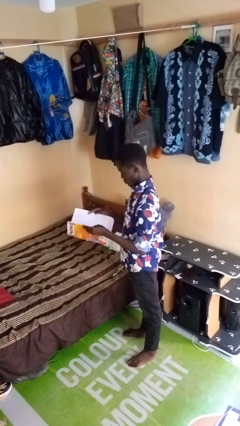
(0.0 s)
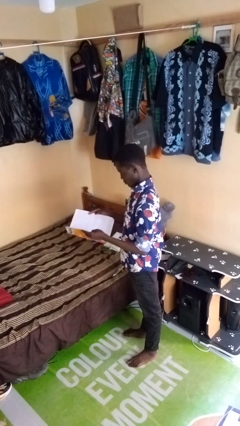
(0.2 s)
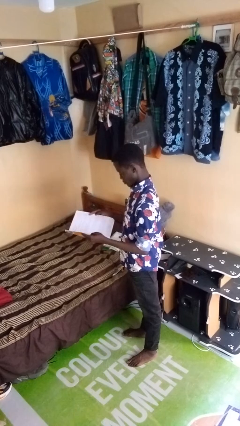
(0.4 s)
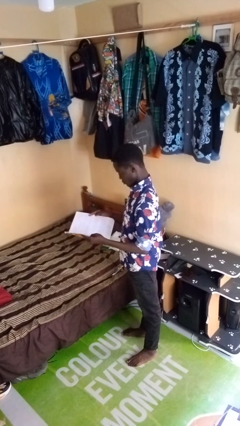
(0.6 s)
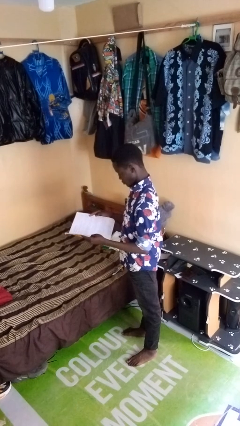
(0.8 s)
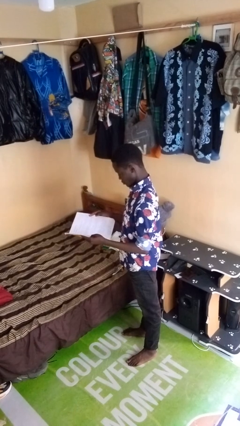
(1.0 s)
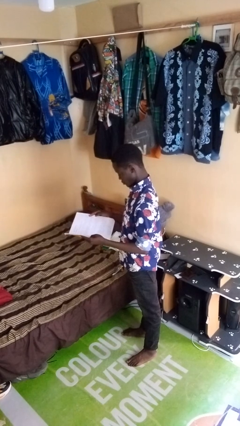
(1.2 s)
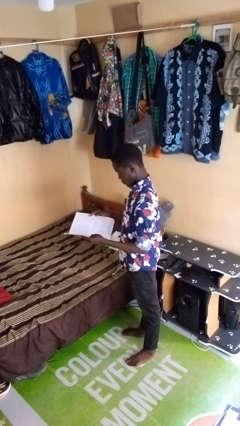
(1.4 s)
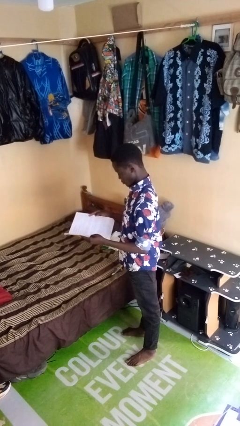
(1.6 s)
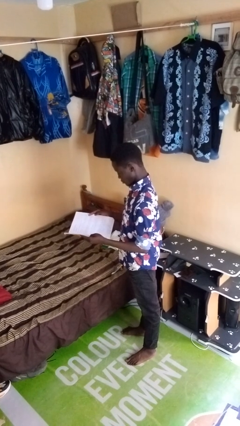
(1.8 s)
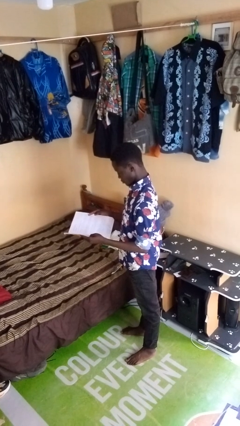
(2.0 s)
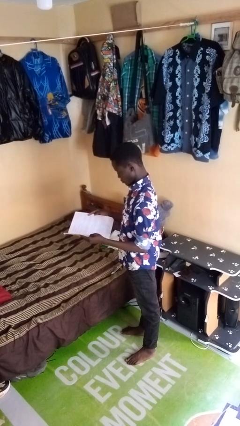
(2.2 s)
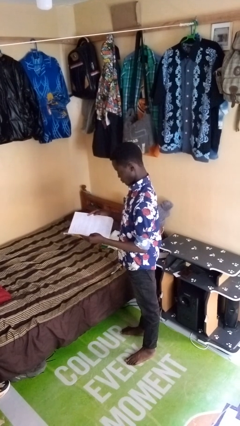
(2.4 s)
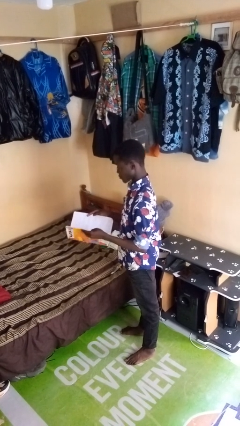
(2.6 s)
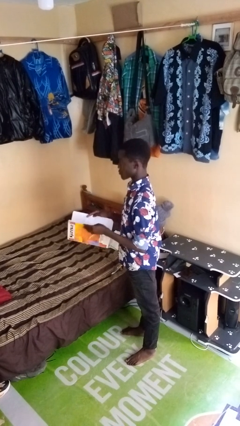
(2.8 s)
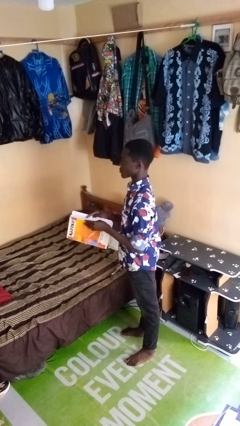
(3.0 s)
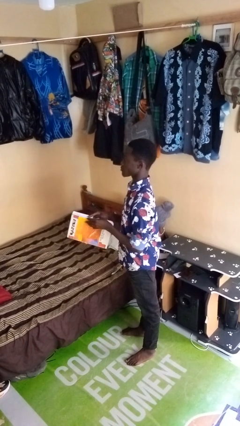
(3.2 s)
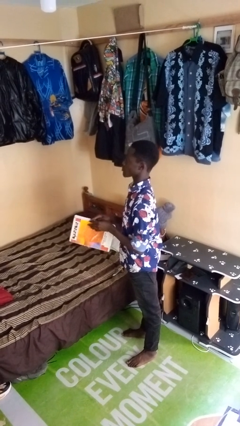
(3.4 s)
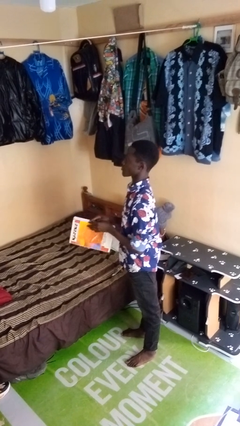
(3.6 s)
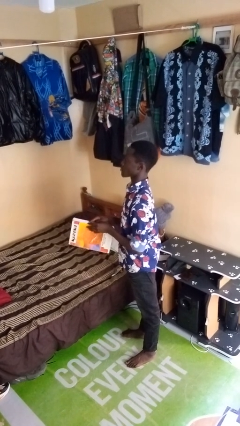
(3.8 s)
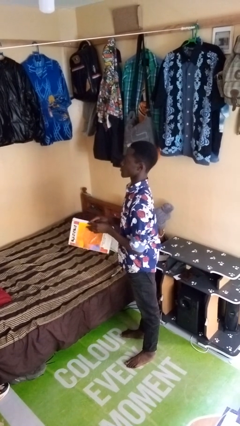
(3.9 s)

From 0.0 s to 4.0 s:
person reads newspaper

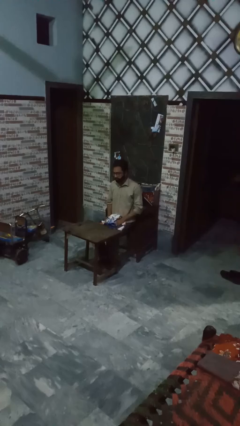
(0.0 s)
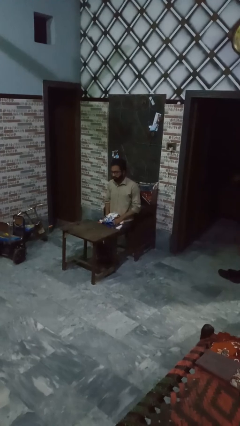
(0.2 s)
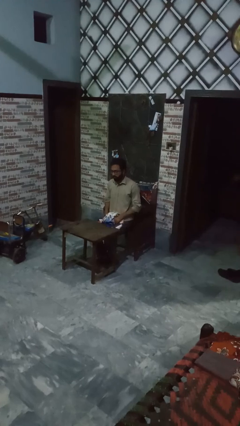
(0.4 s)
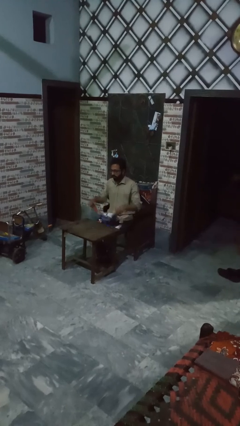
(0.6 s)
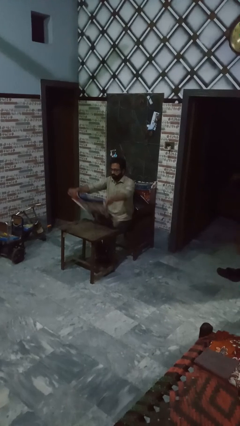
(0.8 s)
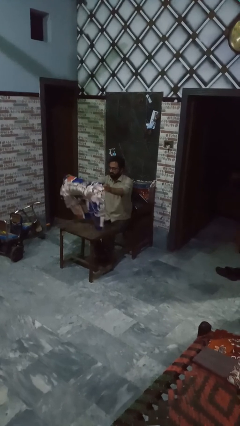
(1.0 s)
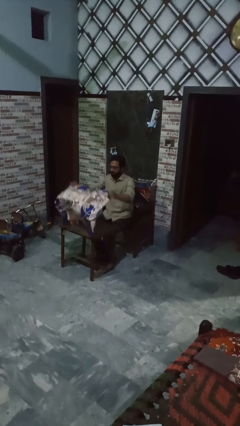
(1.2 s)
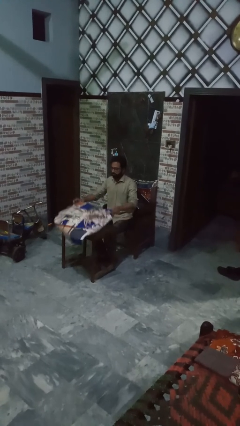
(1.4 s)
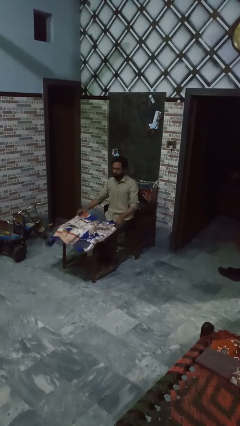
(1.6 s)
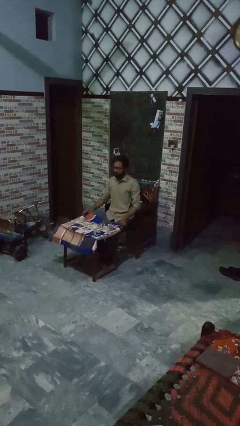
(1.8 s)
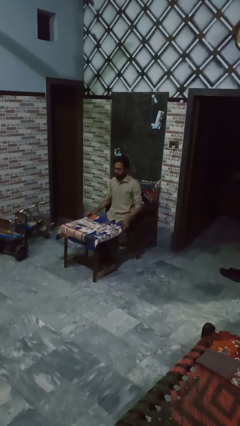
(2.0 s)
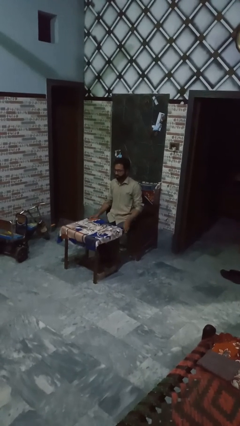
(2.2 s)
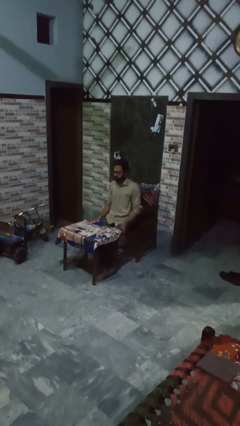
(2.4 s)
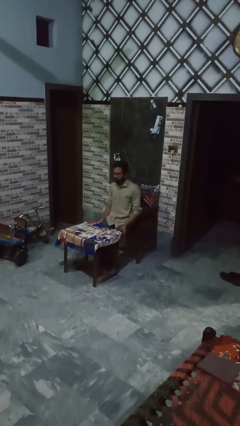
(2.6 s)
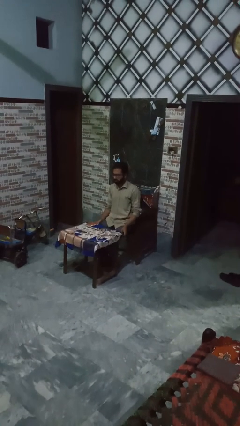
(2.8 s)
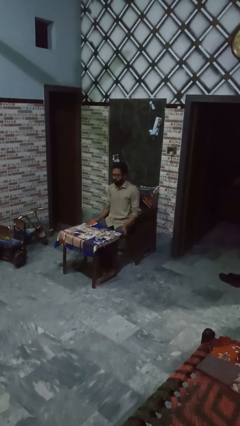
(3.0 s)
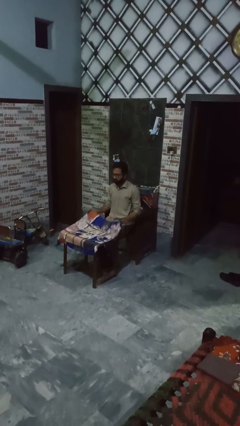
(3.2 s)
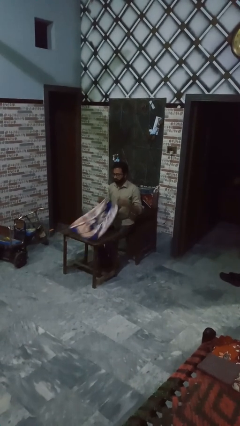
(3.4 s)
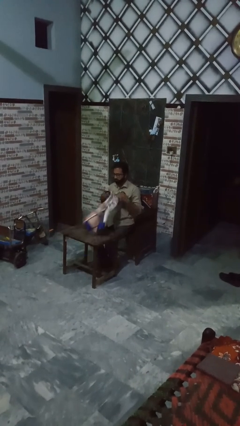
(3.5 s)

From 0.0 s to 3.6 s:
person folds tablecloth

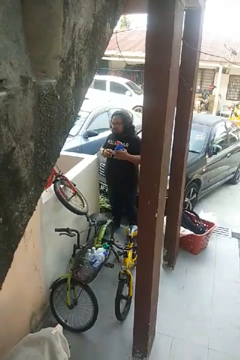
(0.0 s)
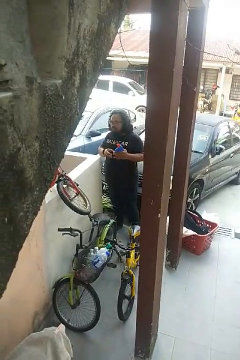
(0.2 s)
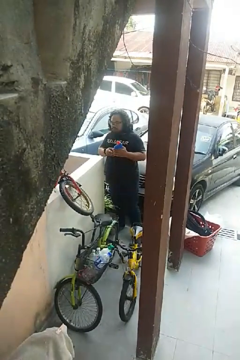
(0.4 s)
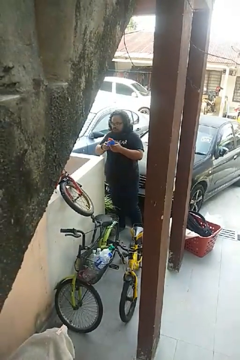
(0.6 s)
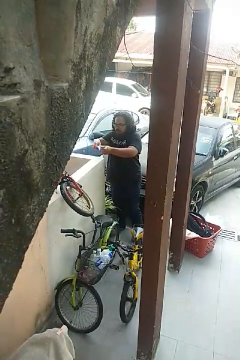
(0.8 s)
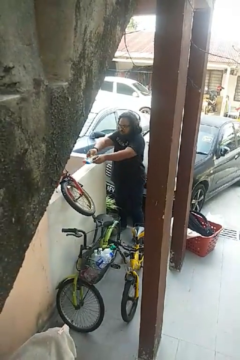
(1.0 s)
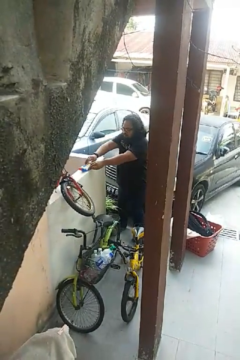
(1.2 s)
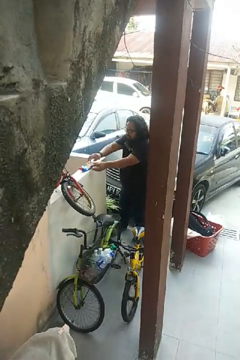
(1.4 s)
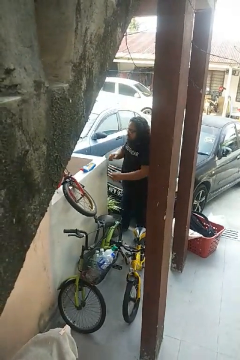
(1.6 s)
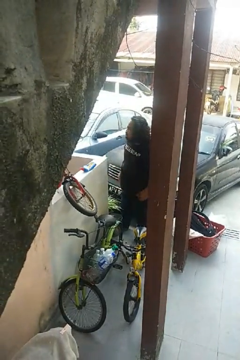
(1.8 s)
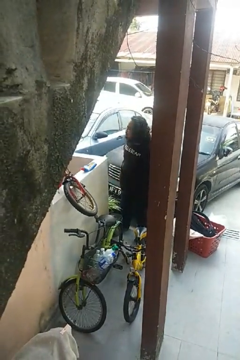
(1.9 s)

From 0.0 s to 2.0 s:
person puts down object on countertop

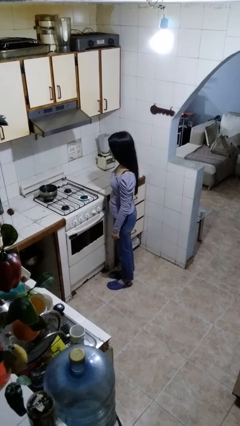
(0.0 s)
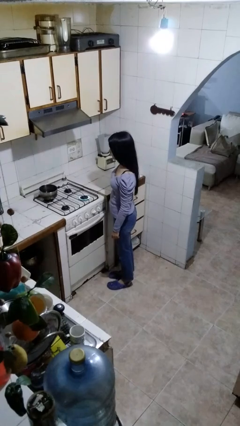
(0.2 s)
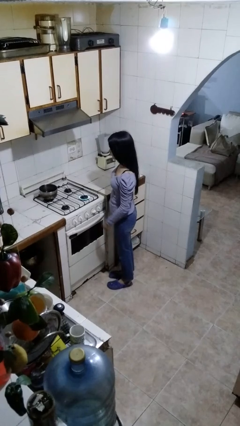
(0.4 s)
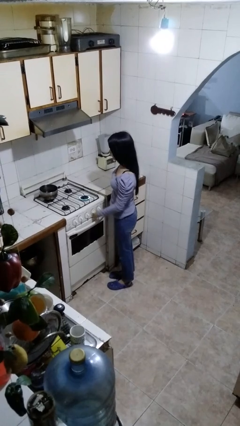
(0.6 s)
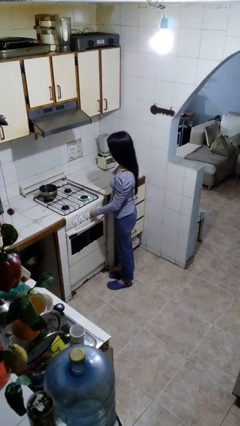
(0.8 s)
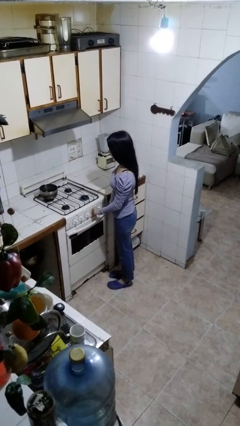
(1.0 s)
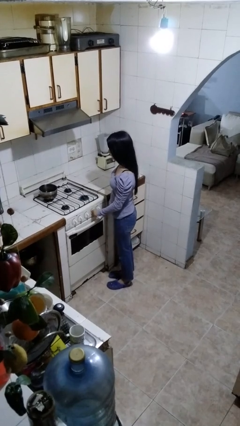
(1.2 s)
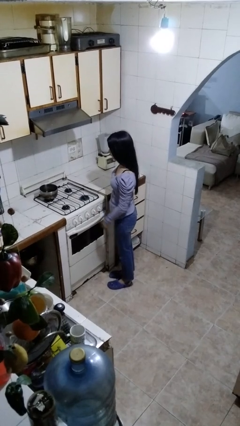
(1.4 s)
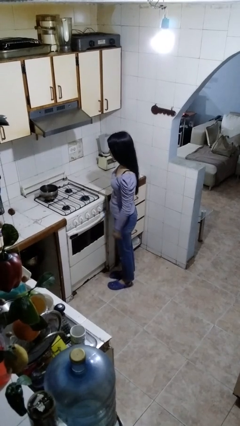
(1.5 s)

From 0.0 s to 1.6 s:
person turns off stovetop

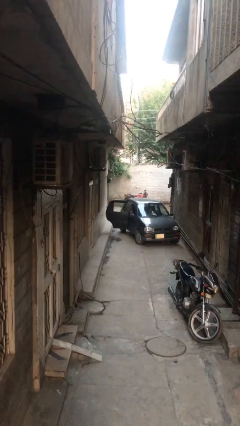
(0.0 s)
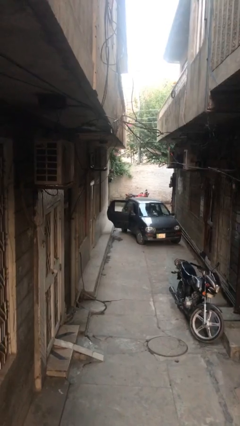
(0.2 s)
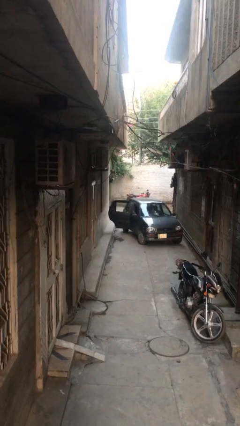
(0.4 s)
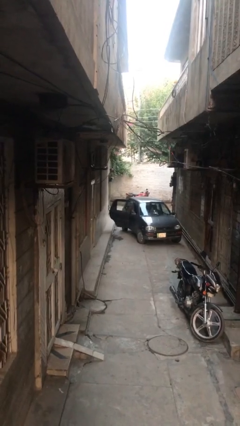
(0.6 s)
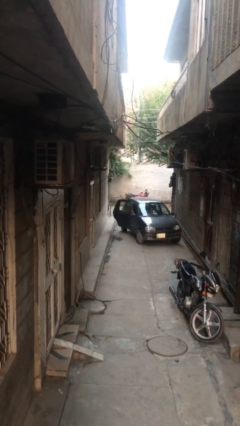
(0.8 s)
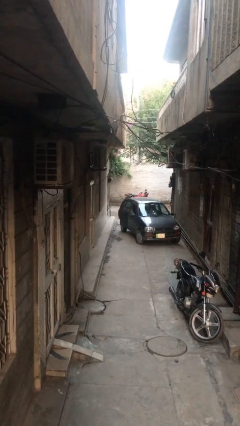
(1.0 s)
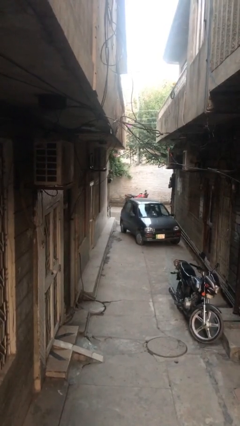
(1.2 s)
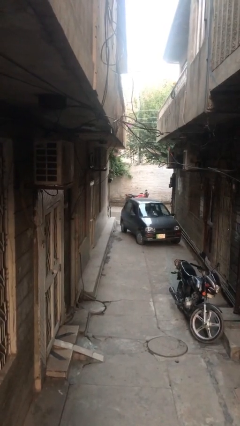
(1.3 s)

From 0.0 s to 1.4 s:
person closes car door

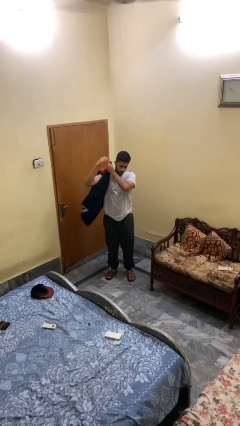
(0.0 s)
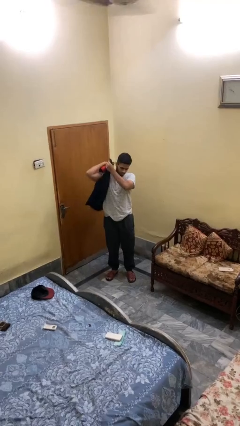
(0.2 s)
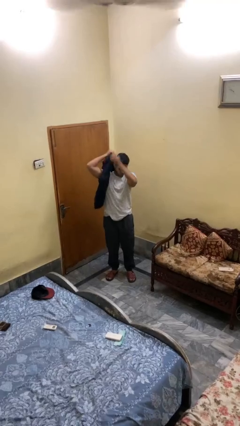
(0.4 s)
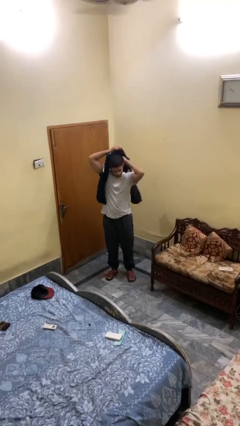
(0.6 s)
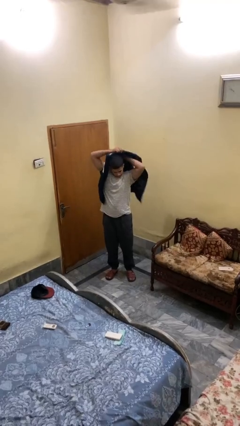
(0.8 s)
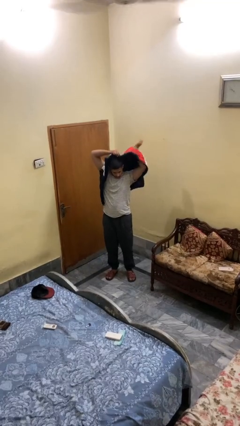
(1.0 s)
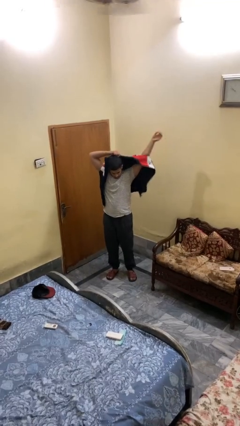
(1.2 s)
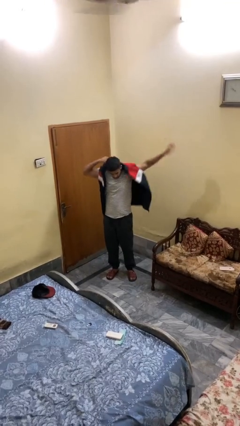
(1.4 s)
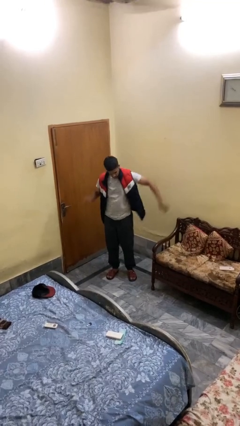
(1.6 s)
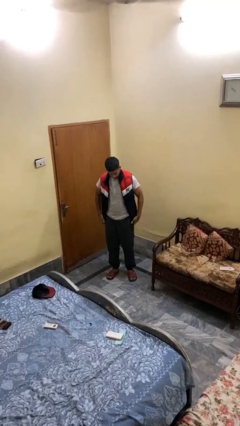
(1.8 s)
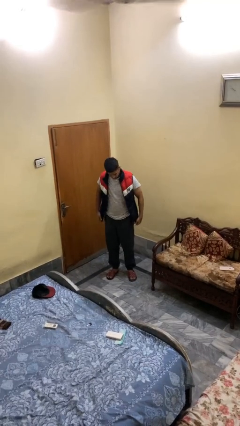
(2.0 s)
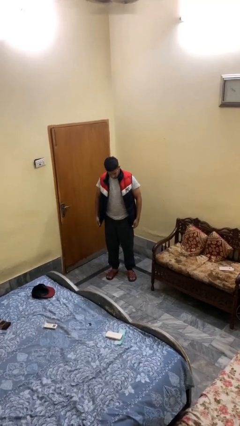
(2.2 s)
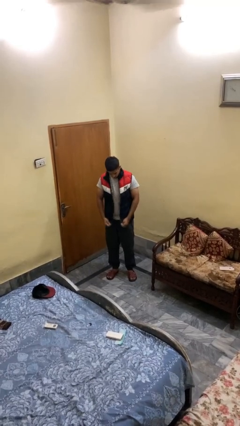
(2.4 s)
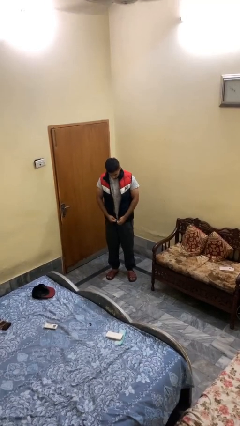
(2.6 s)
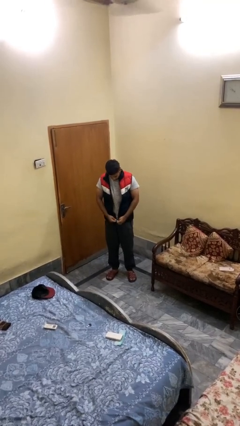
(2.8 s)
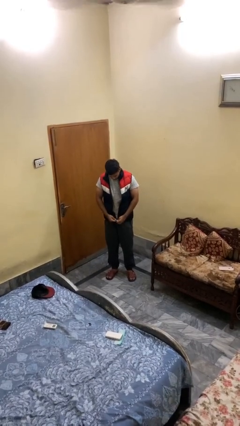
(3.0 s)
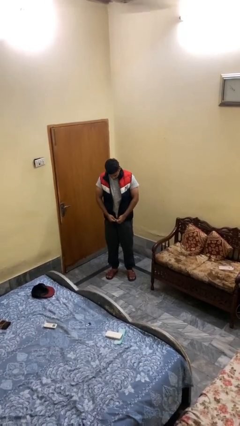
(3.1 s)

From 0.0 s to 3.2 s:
person puts on jacket

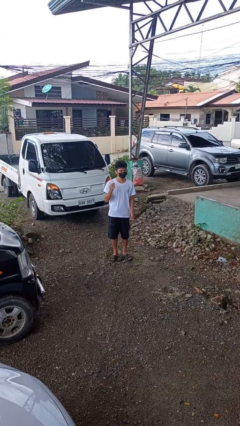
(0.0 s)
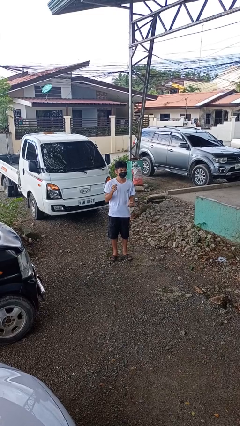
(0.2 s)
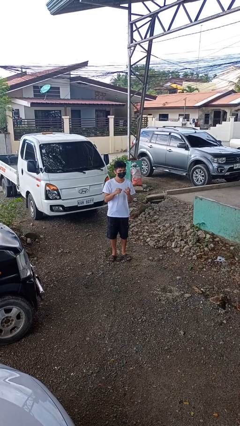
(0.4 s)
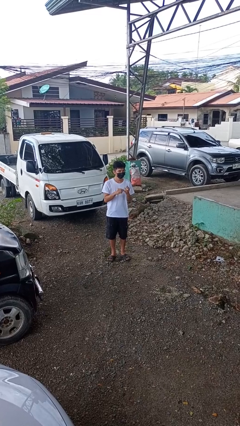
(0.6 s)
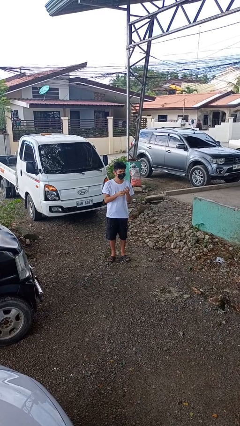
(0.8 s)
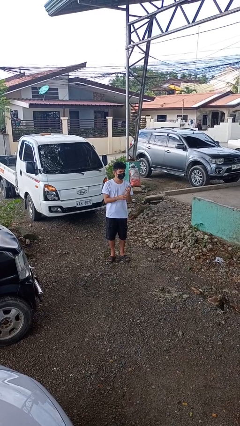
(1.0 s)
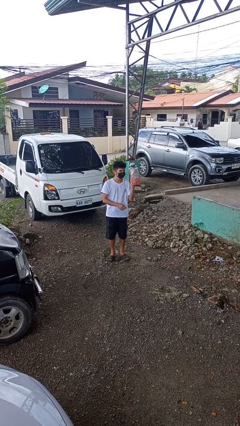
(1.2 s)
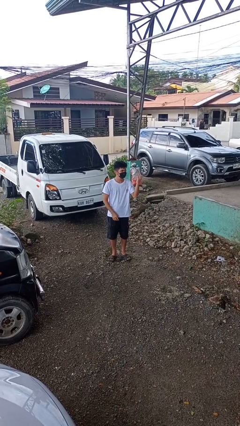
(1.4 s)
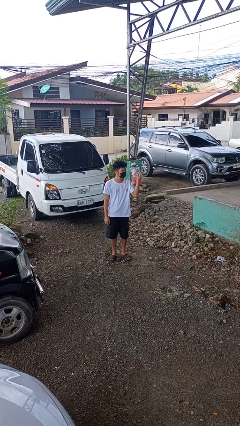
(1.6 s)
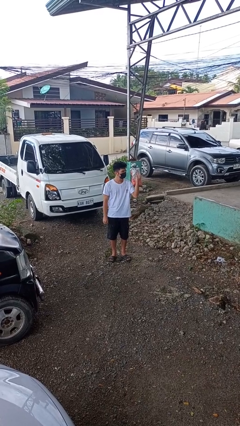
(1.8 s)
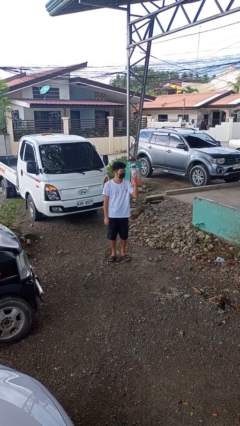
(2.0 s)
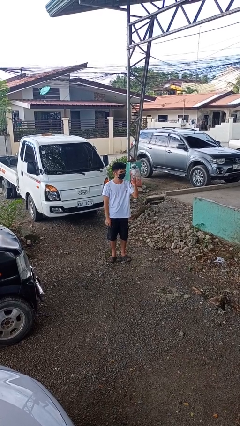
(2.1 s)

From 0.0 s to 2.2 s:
person puts on ring
